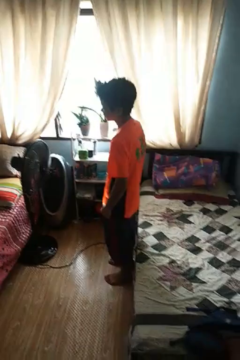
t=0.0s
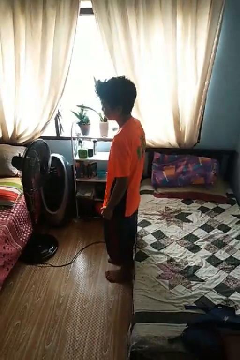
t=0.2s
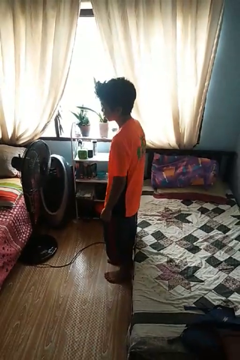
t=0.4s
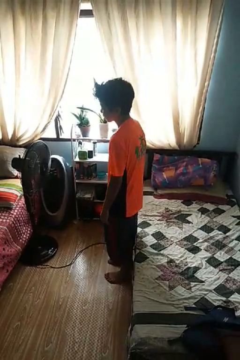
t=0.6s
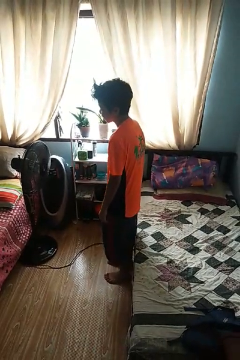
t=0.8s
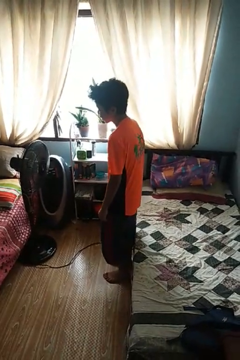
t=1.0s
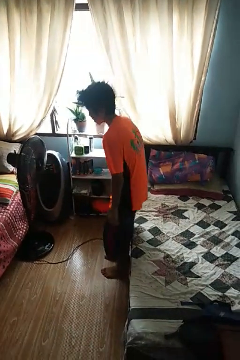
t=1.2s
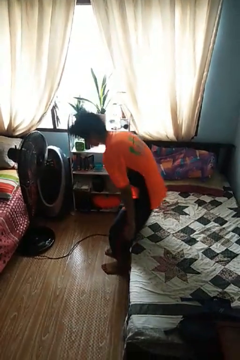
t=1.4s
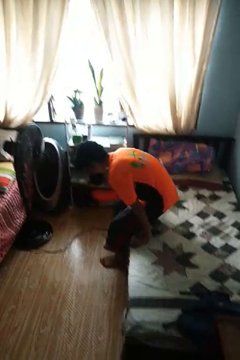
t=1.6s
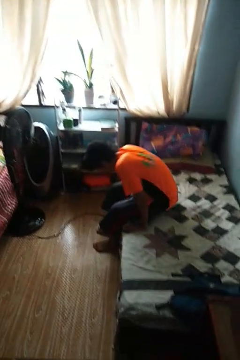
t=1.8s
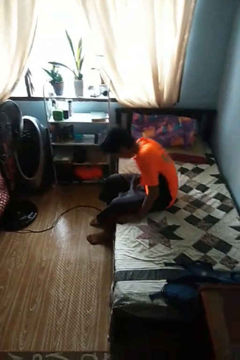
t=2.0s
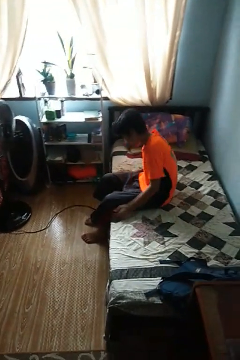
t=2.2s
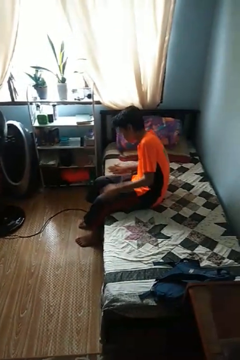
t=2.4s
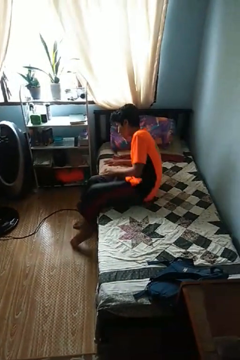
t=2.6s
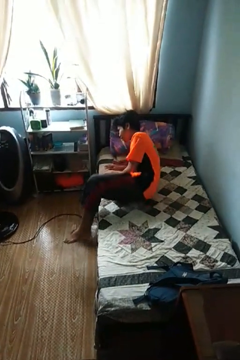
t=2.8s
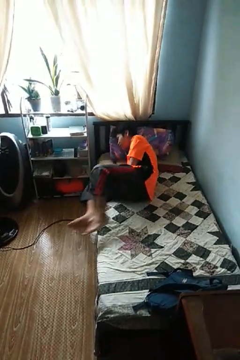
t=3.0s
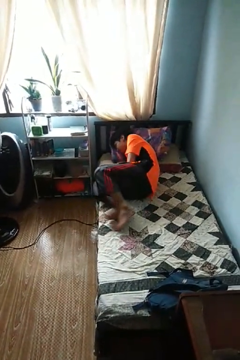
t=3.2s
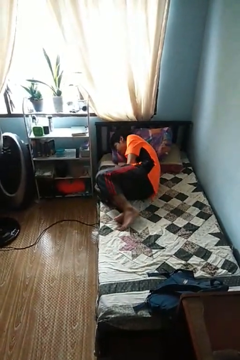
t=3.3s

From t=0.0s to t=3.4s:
person lies down on bed

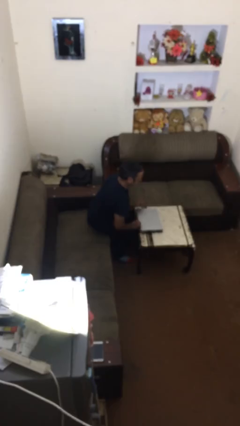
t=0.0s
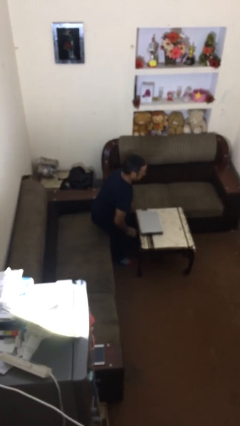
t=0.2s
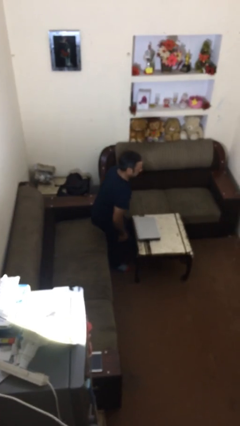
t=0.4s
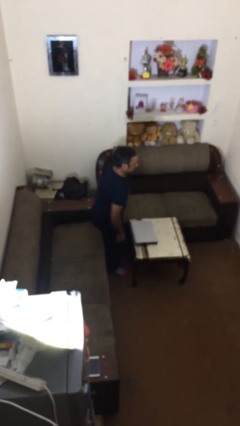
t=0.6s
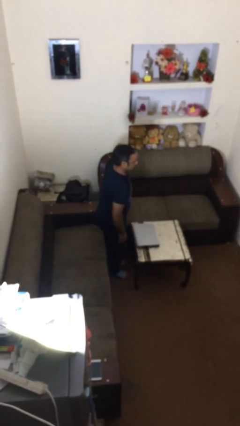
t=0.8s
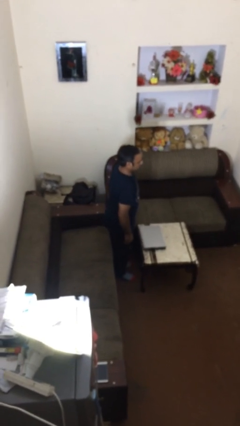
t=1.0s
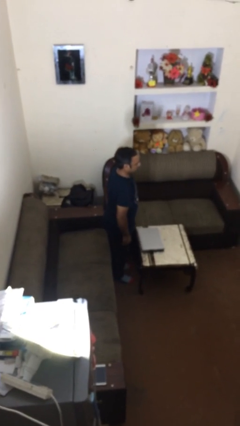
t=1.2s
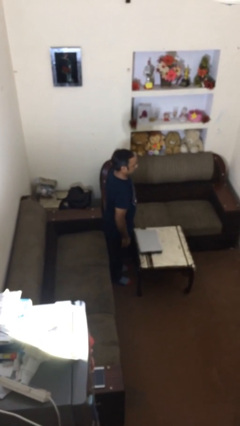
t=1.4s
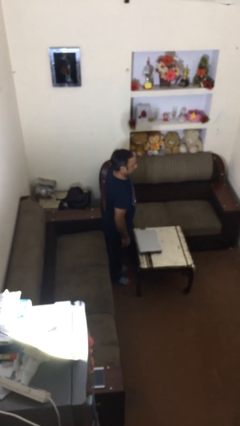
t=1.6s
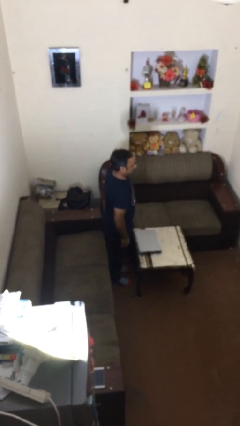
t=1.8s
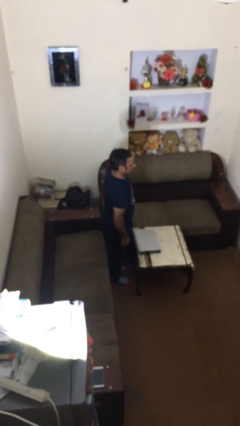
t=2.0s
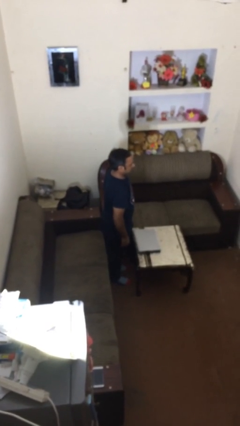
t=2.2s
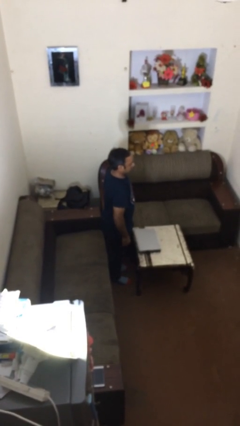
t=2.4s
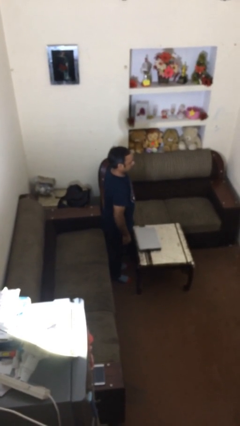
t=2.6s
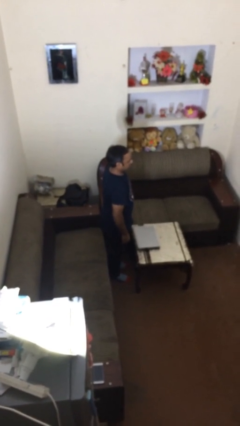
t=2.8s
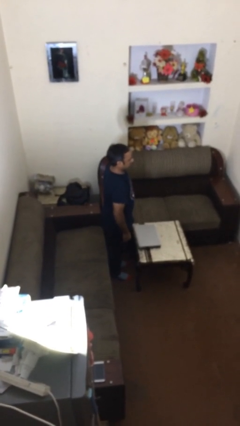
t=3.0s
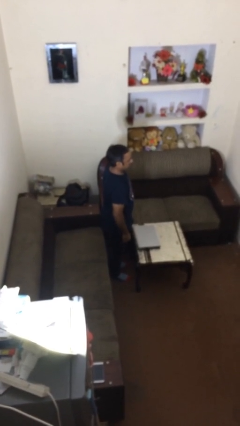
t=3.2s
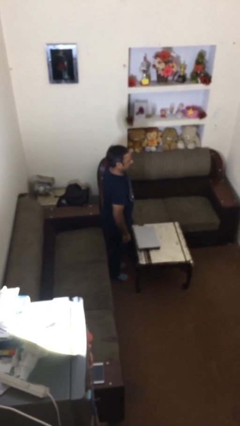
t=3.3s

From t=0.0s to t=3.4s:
person stands up

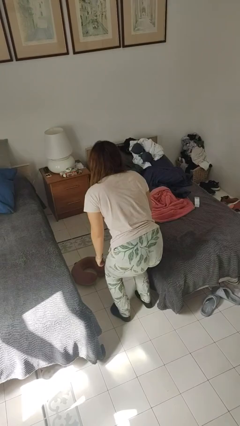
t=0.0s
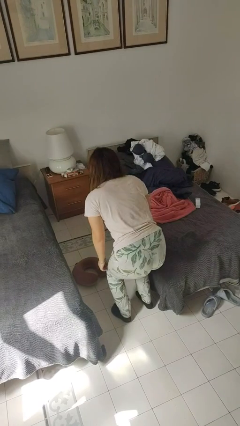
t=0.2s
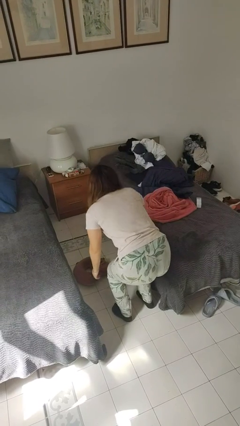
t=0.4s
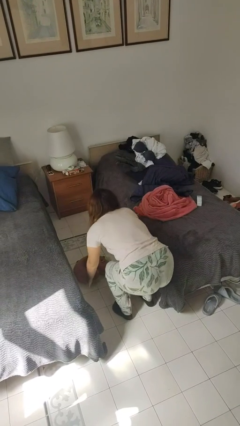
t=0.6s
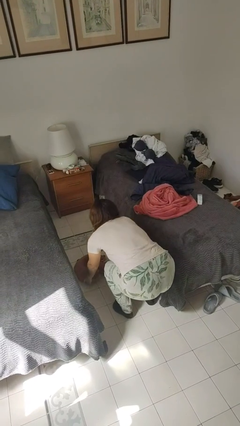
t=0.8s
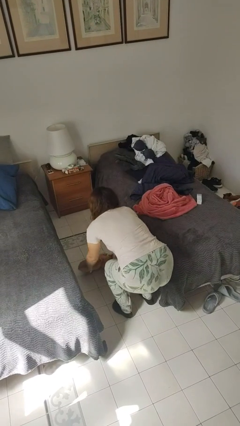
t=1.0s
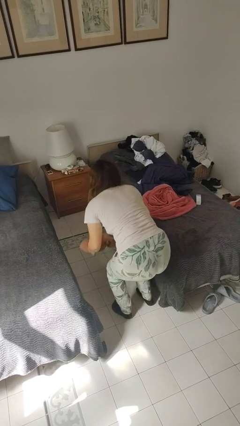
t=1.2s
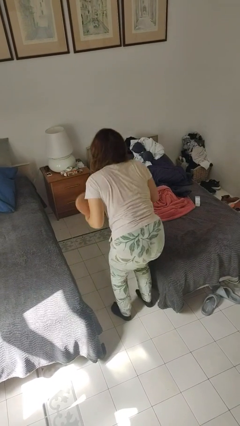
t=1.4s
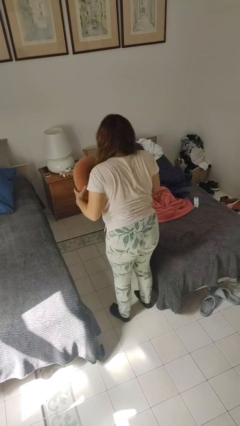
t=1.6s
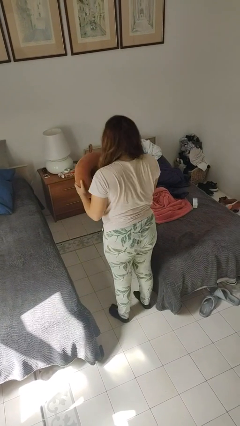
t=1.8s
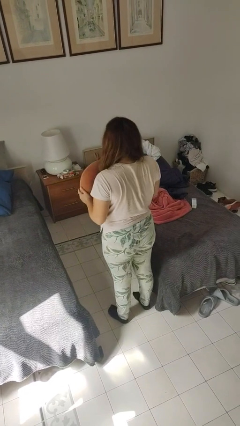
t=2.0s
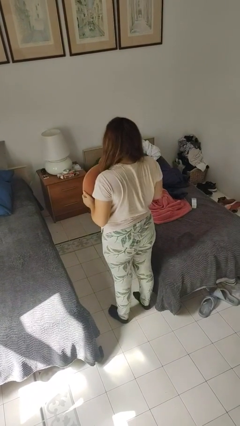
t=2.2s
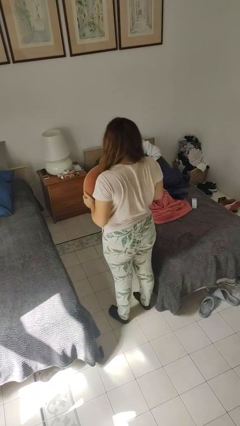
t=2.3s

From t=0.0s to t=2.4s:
person picks up object from floor

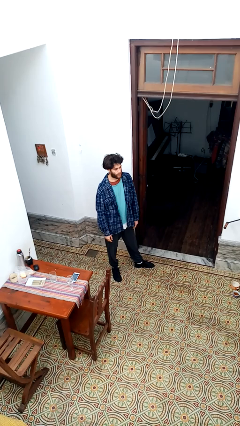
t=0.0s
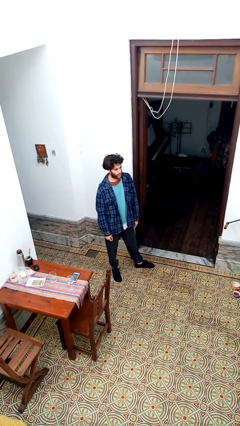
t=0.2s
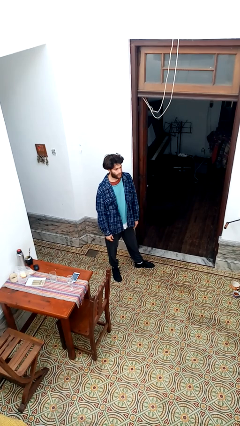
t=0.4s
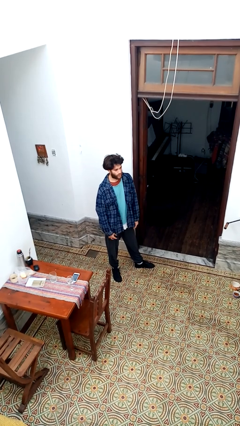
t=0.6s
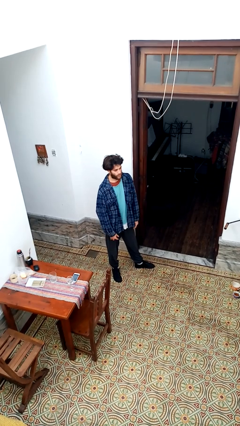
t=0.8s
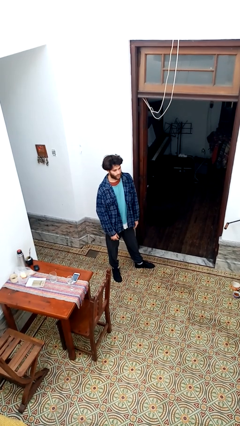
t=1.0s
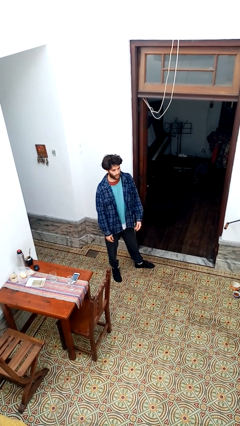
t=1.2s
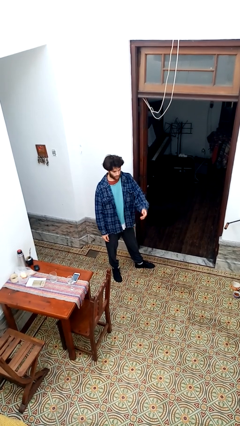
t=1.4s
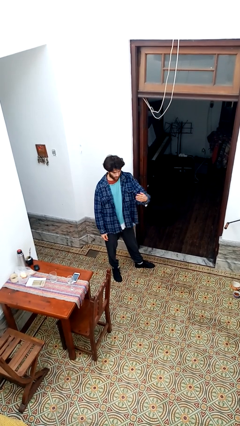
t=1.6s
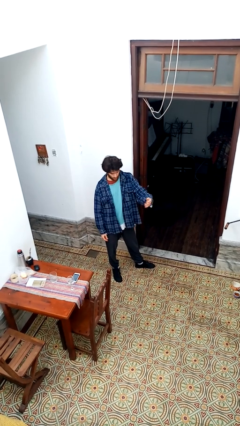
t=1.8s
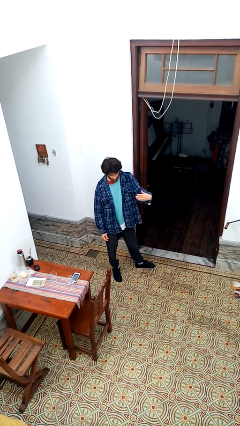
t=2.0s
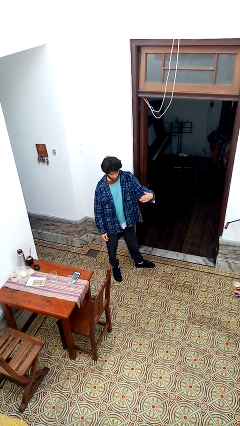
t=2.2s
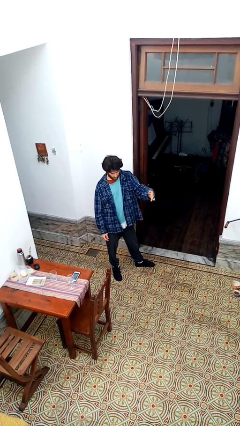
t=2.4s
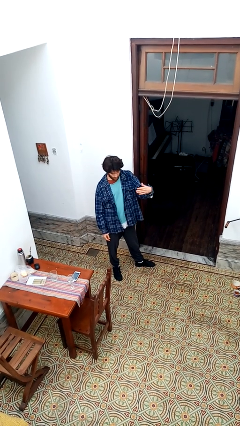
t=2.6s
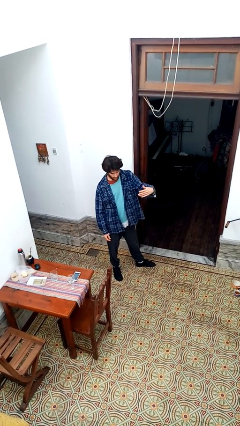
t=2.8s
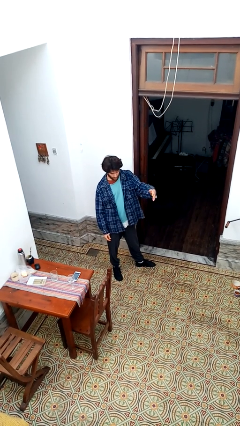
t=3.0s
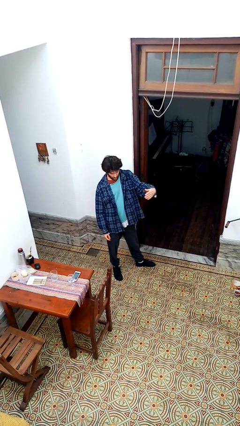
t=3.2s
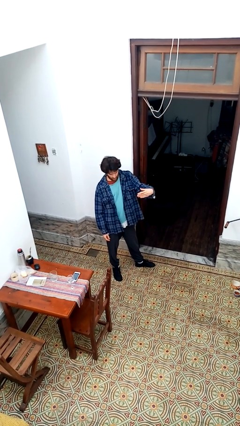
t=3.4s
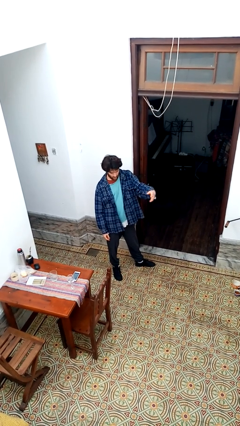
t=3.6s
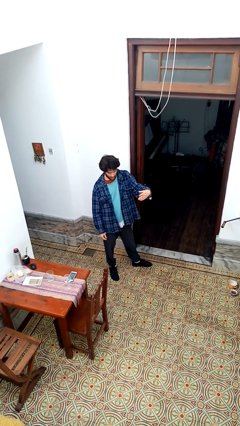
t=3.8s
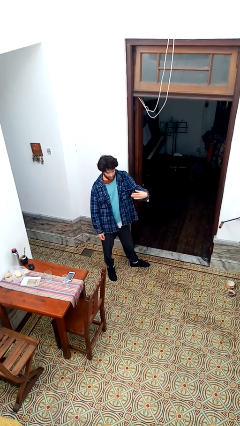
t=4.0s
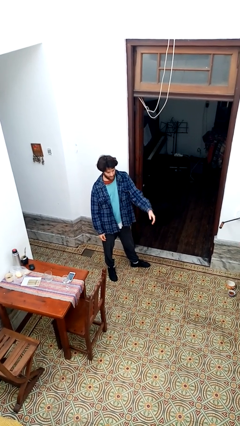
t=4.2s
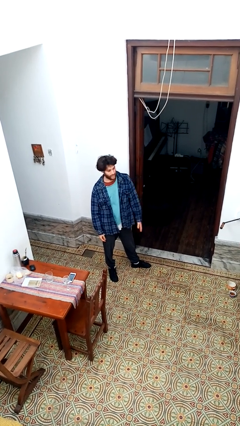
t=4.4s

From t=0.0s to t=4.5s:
person gestures come here

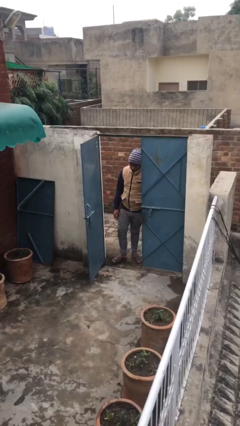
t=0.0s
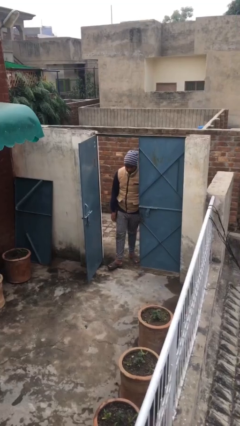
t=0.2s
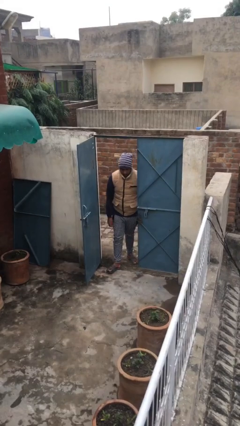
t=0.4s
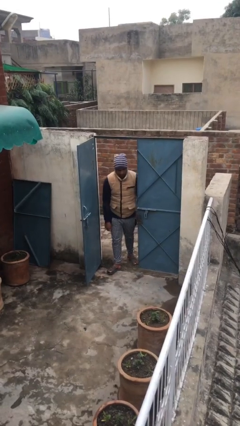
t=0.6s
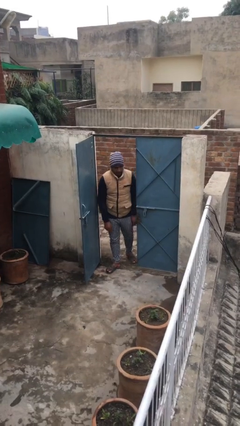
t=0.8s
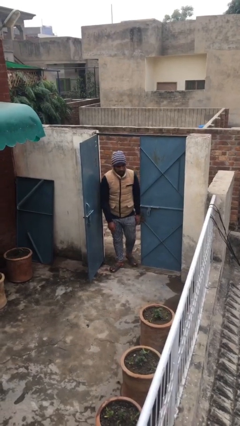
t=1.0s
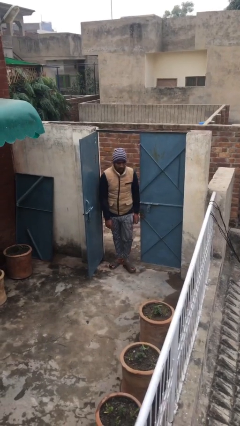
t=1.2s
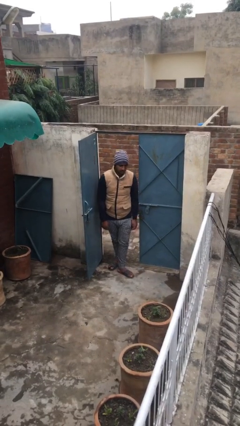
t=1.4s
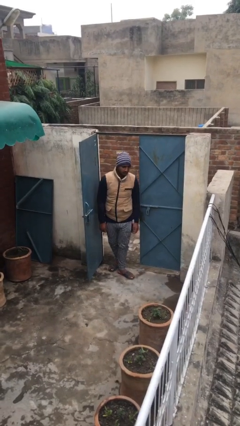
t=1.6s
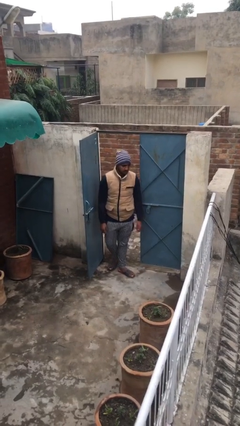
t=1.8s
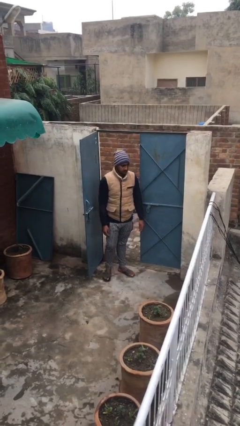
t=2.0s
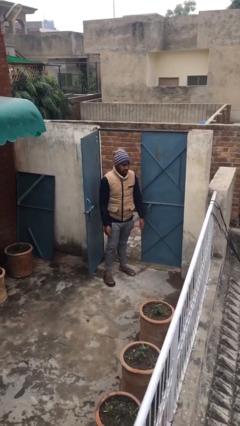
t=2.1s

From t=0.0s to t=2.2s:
person enters scene through structure

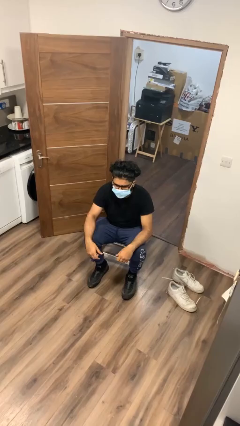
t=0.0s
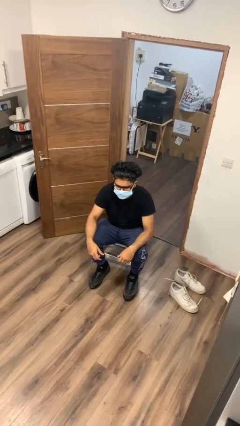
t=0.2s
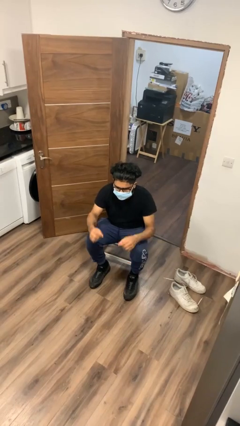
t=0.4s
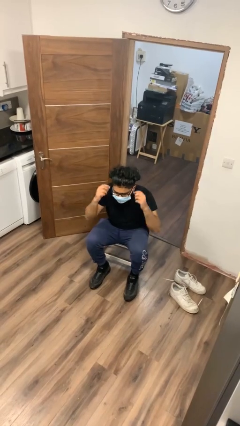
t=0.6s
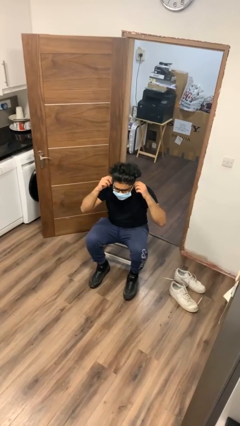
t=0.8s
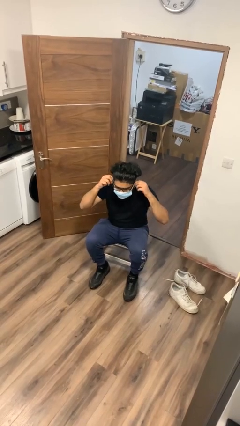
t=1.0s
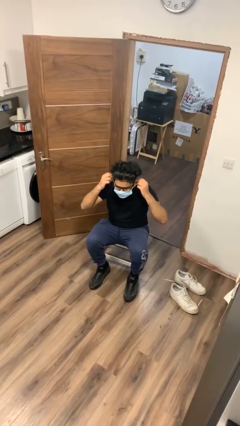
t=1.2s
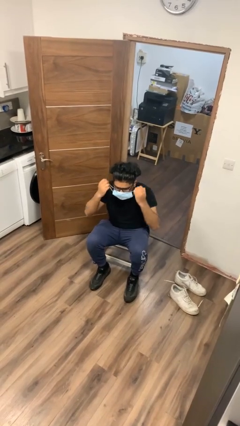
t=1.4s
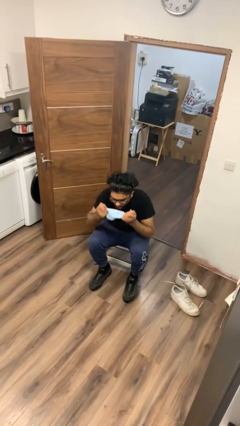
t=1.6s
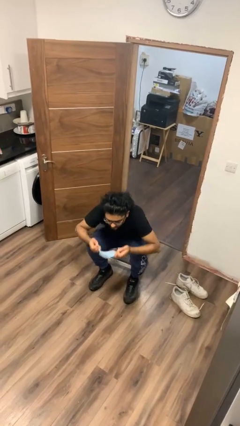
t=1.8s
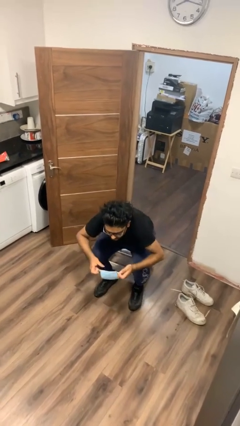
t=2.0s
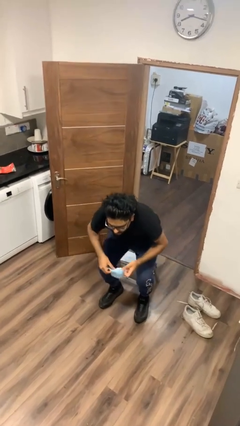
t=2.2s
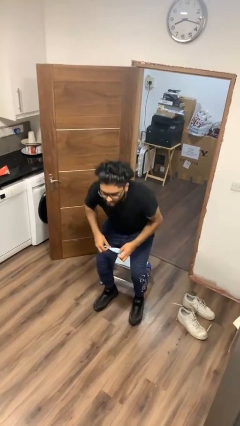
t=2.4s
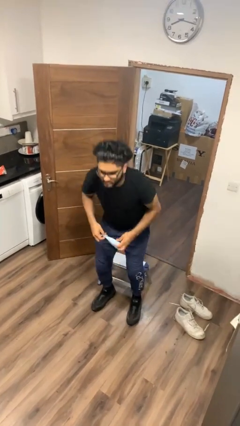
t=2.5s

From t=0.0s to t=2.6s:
person takes off facemask
